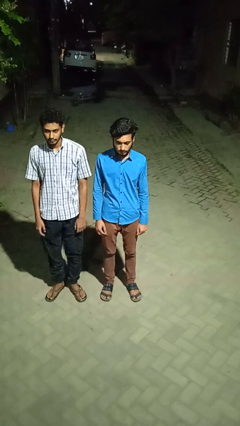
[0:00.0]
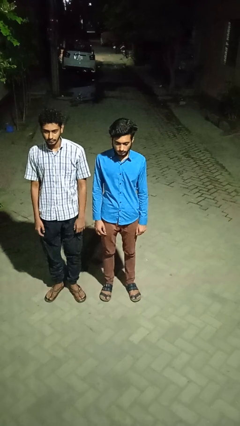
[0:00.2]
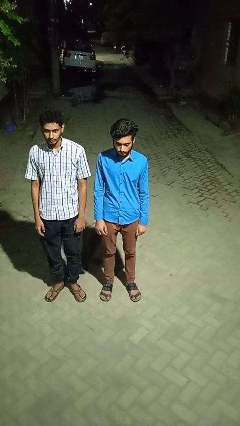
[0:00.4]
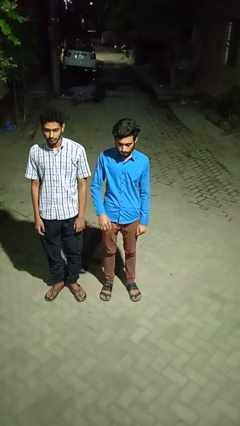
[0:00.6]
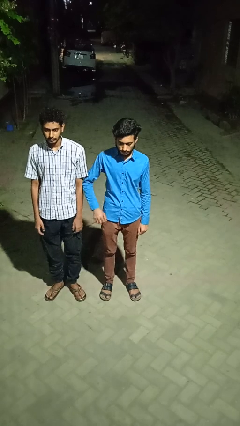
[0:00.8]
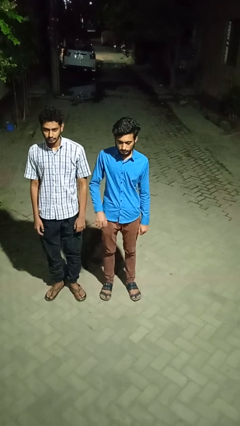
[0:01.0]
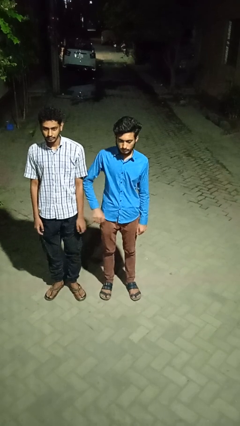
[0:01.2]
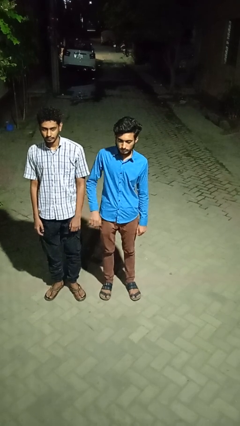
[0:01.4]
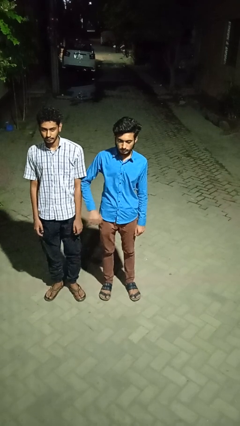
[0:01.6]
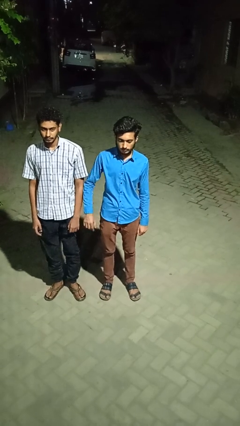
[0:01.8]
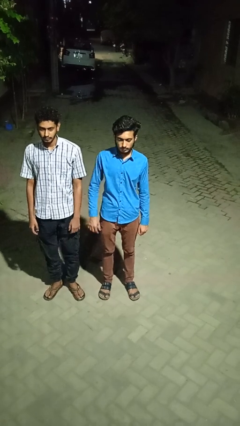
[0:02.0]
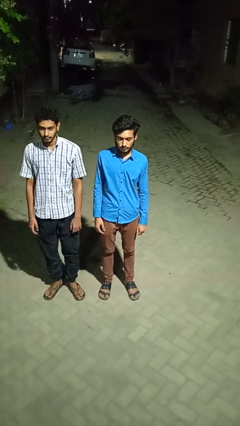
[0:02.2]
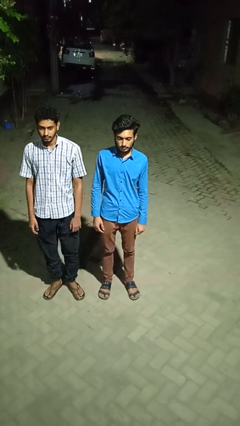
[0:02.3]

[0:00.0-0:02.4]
person nudges person with elbow

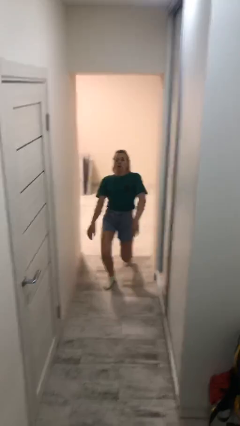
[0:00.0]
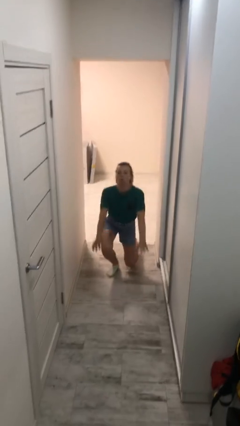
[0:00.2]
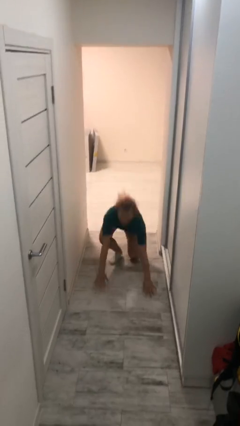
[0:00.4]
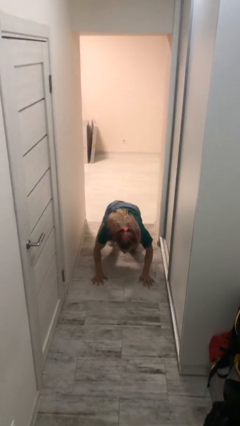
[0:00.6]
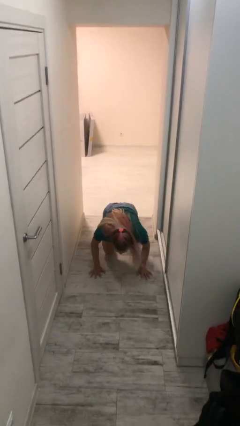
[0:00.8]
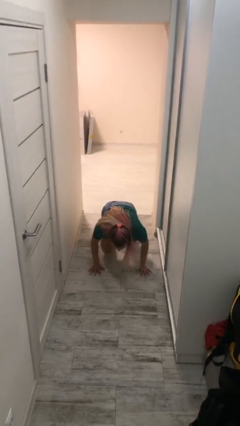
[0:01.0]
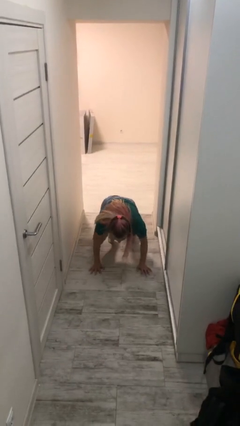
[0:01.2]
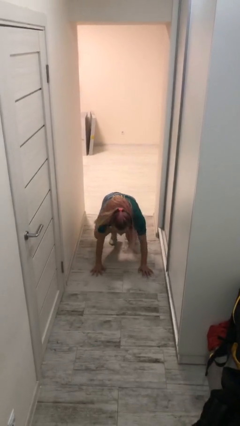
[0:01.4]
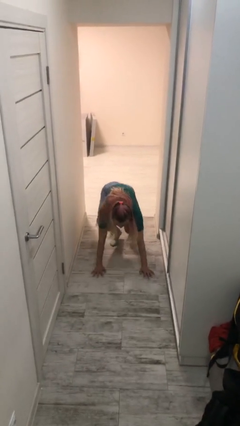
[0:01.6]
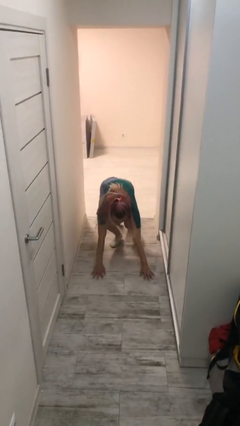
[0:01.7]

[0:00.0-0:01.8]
person trips on object on floor

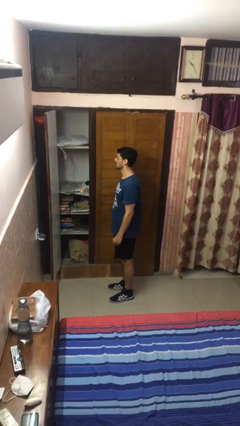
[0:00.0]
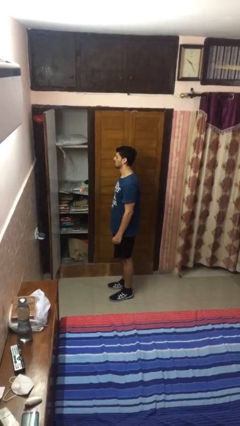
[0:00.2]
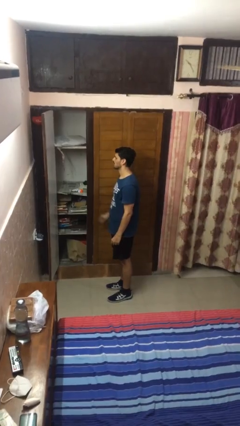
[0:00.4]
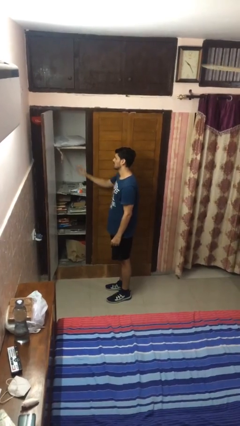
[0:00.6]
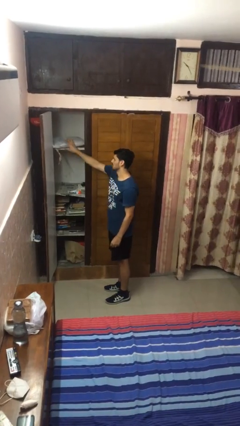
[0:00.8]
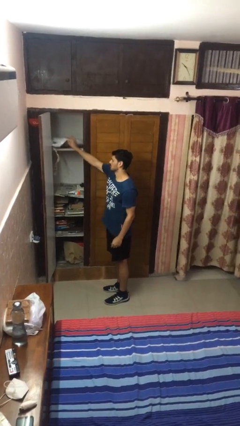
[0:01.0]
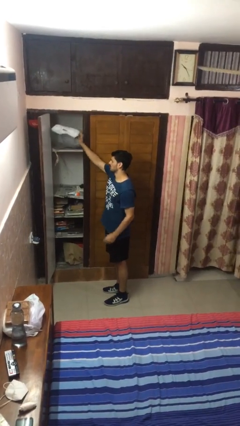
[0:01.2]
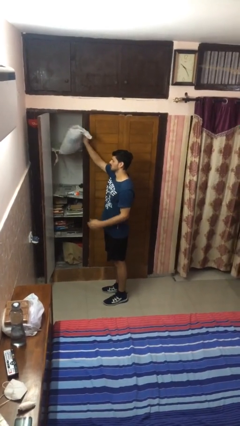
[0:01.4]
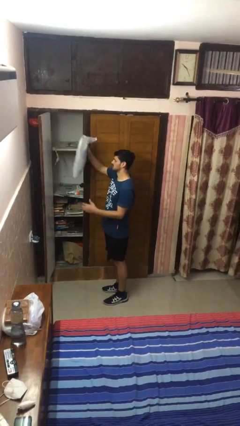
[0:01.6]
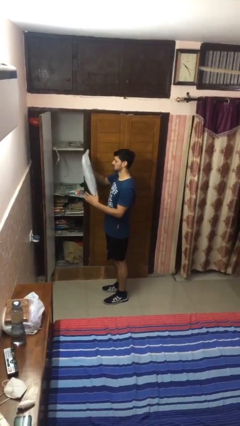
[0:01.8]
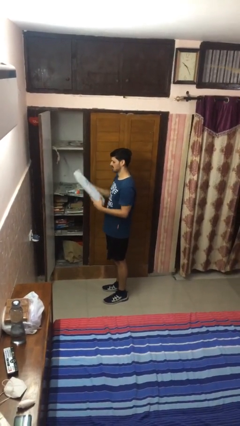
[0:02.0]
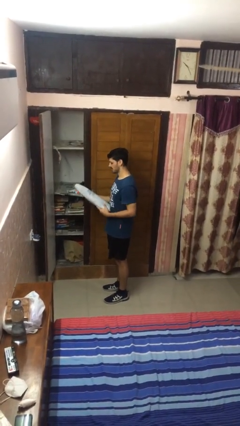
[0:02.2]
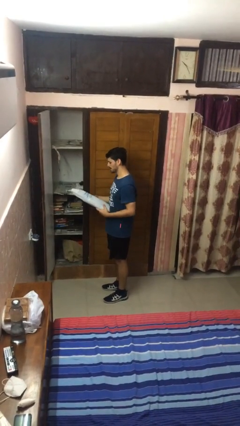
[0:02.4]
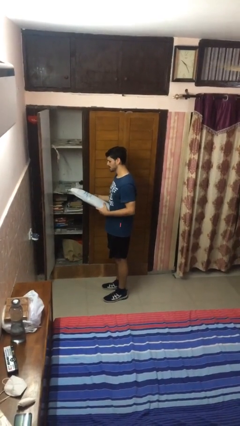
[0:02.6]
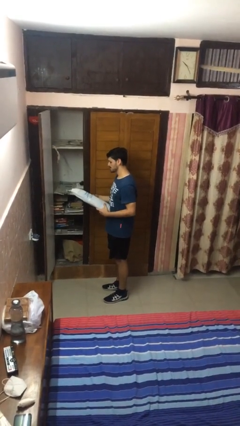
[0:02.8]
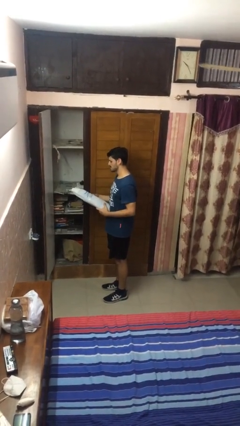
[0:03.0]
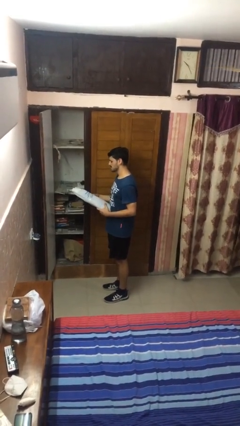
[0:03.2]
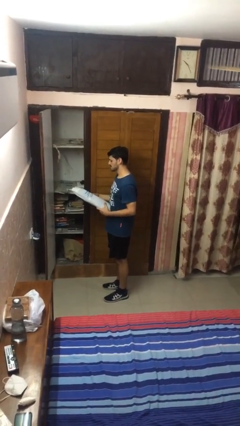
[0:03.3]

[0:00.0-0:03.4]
person picks up object from shelf

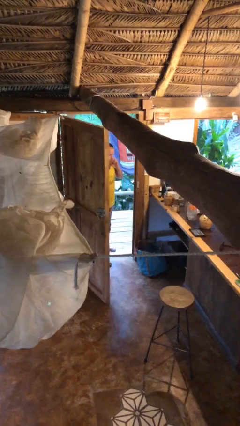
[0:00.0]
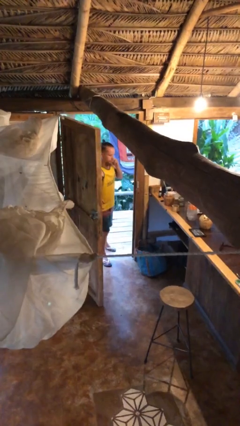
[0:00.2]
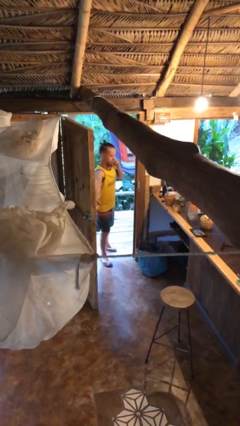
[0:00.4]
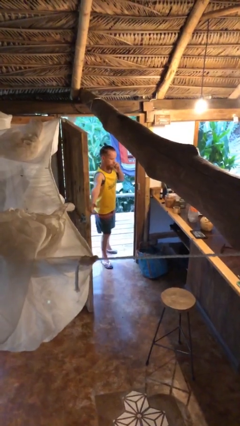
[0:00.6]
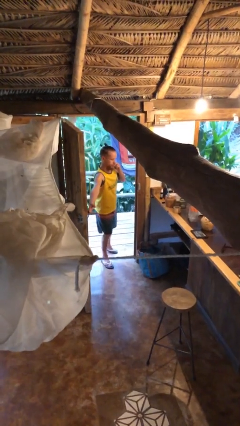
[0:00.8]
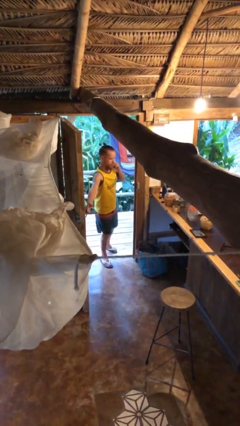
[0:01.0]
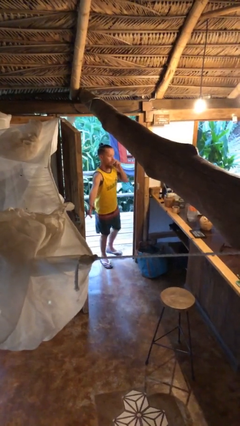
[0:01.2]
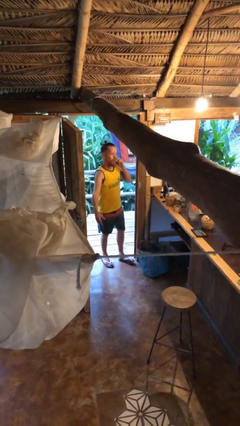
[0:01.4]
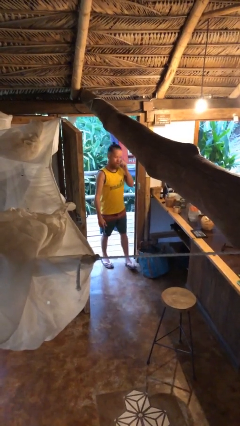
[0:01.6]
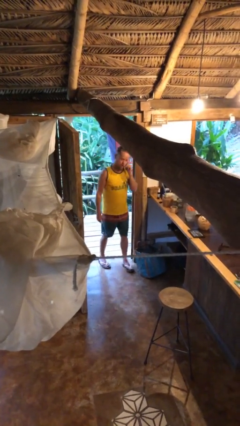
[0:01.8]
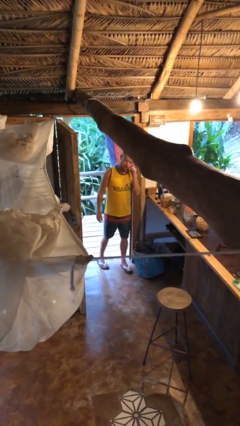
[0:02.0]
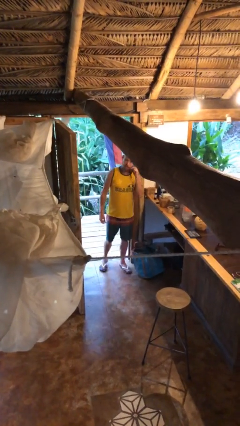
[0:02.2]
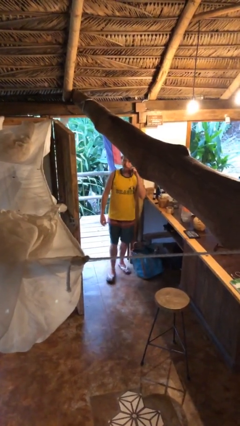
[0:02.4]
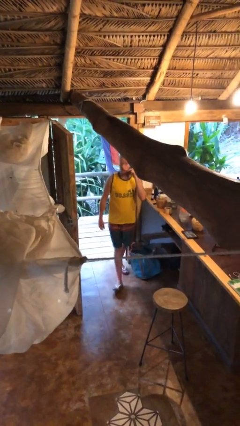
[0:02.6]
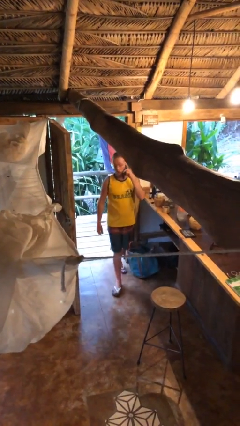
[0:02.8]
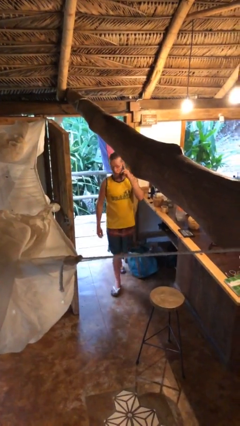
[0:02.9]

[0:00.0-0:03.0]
person enters scene through structure

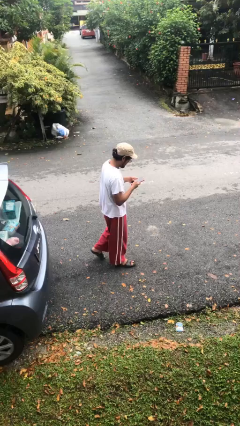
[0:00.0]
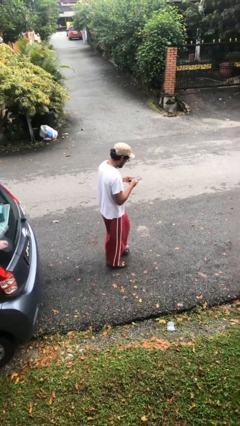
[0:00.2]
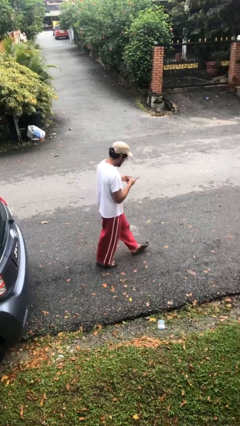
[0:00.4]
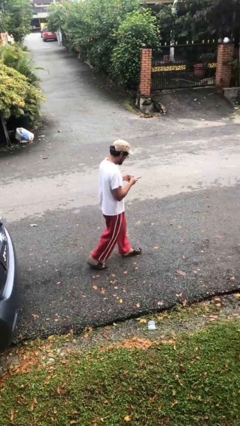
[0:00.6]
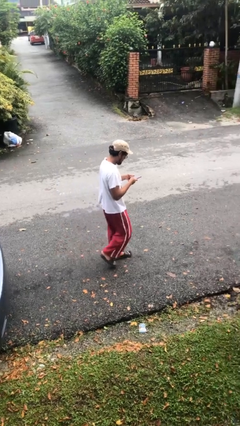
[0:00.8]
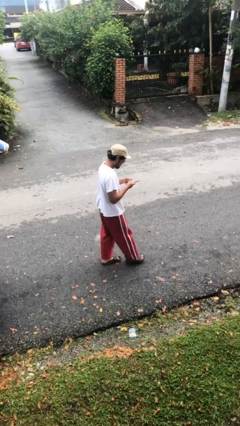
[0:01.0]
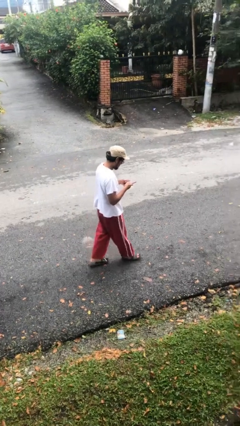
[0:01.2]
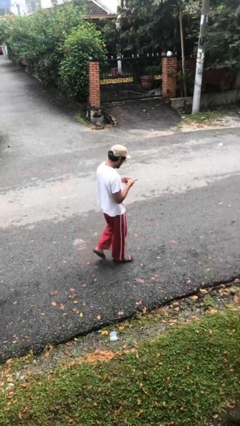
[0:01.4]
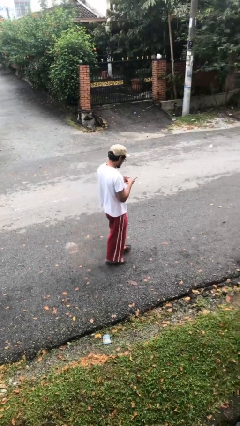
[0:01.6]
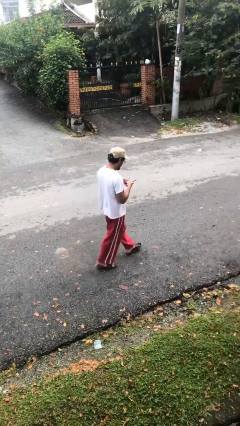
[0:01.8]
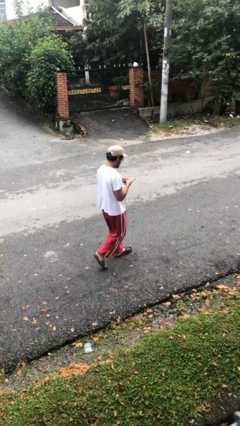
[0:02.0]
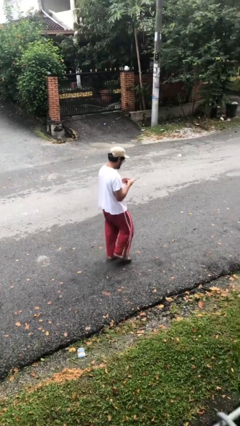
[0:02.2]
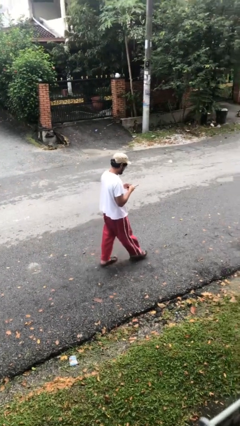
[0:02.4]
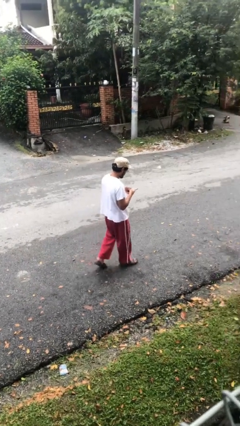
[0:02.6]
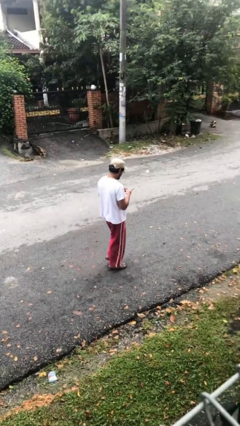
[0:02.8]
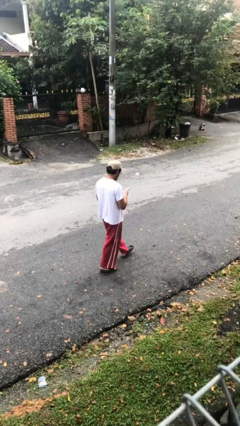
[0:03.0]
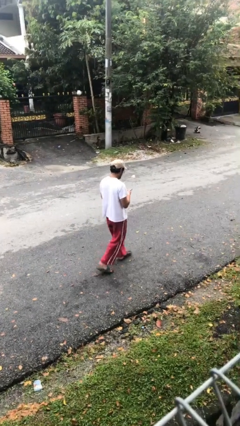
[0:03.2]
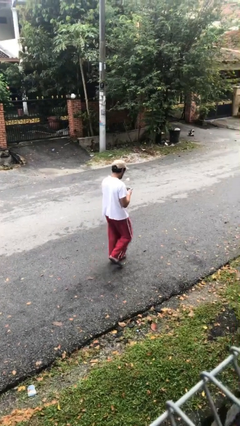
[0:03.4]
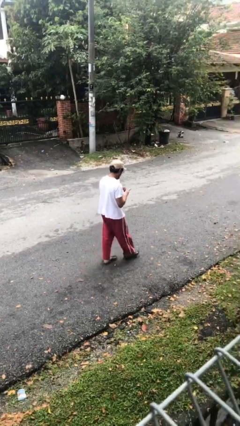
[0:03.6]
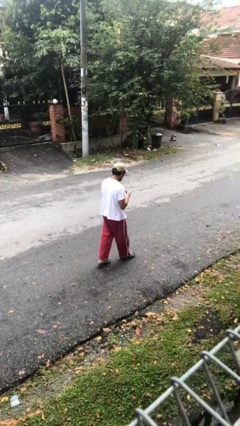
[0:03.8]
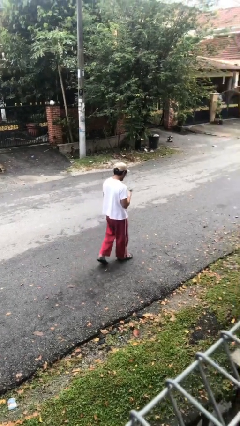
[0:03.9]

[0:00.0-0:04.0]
person texts on phone

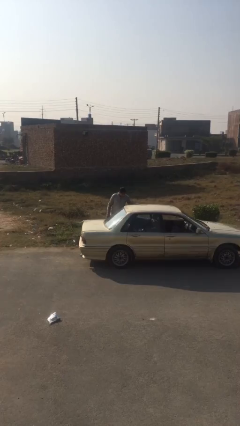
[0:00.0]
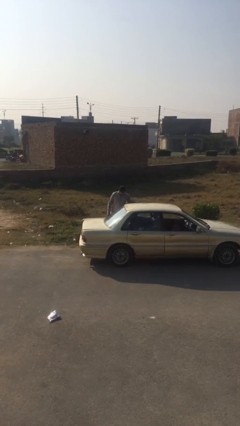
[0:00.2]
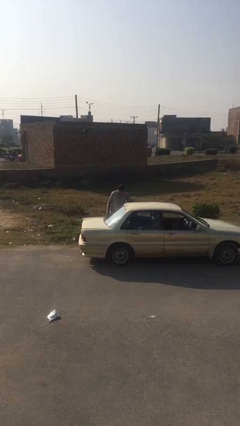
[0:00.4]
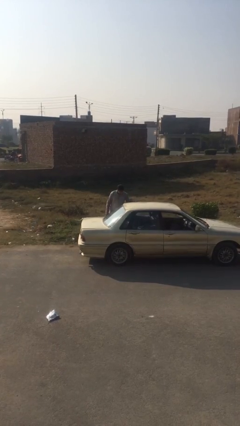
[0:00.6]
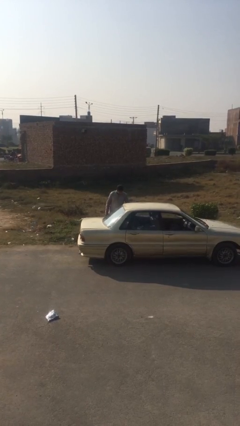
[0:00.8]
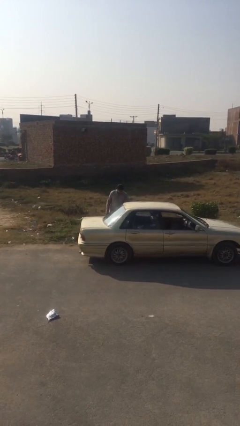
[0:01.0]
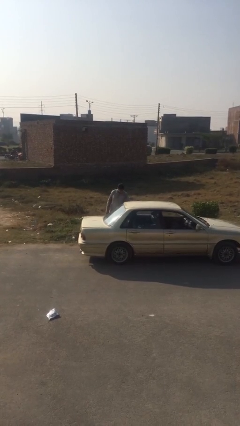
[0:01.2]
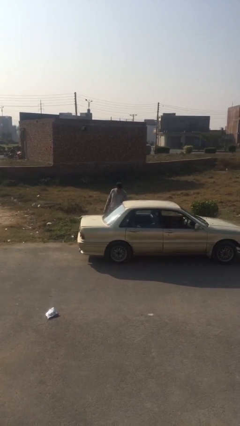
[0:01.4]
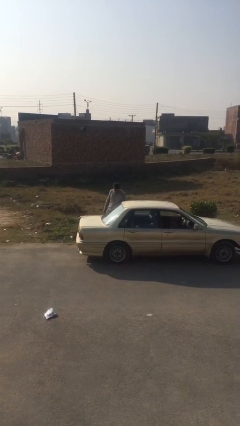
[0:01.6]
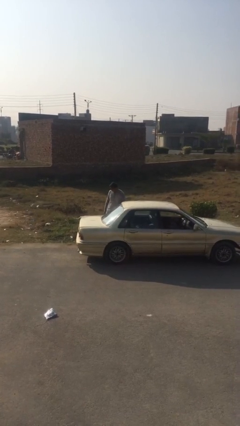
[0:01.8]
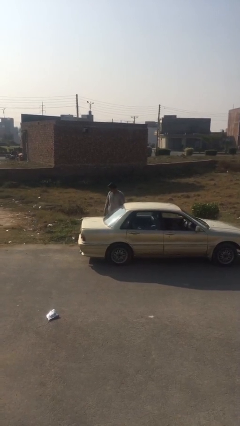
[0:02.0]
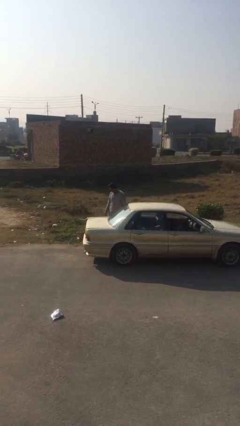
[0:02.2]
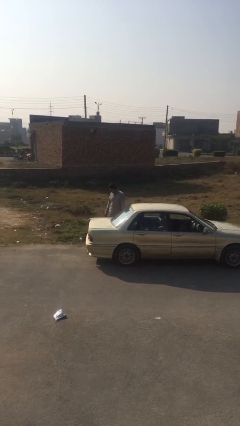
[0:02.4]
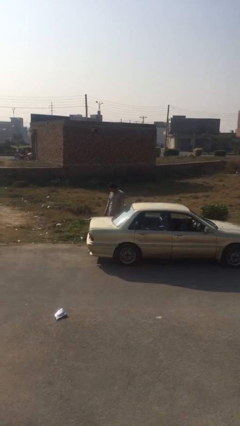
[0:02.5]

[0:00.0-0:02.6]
person closes car door

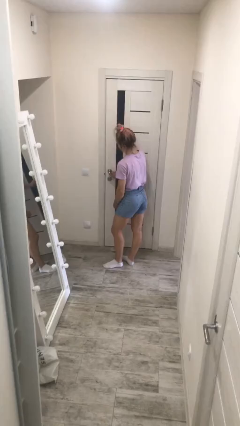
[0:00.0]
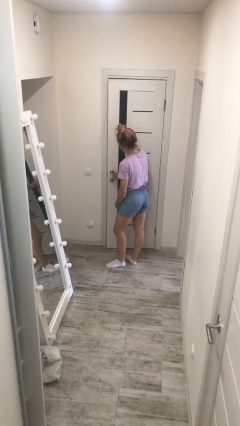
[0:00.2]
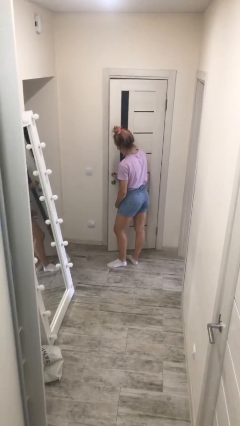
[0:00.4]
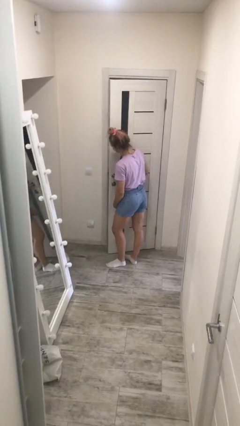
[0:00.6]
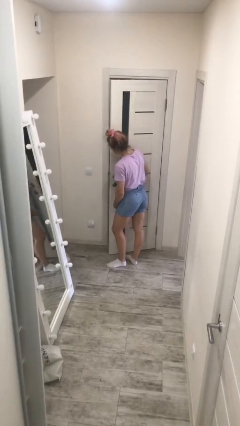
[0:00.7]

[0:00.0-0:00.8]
person opens facility door
